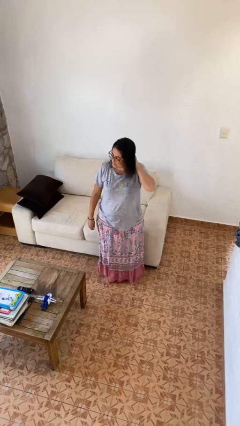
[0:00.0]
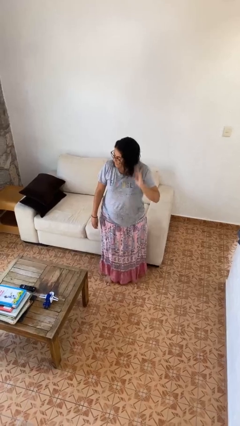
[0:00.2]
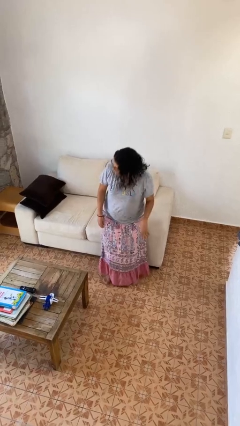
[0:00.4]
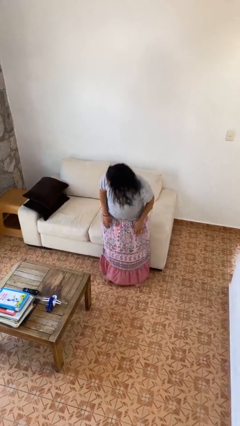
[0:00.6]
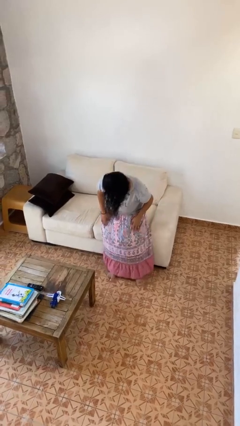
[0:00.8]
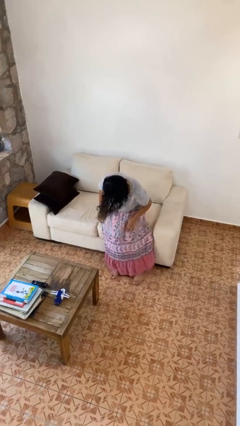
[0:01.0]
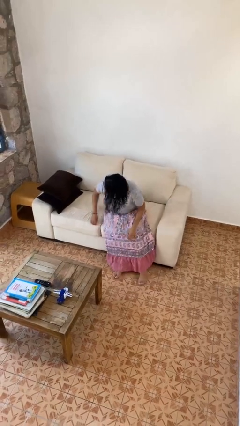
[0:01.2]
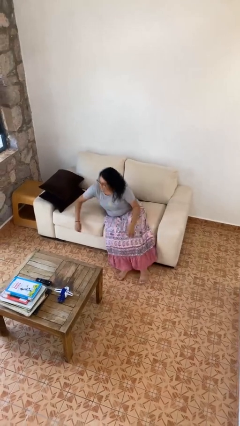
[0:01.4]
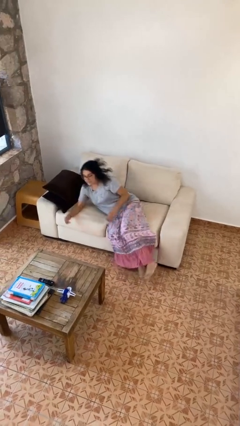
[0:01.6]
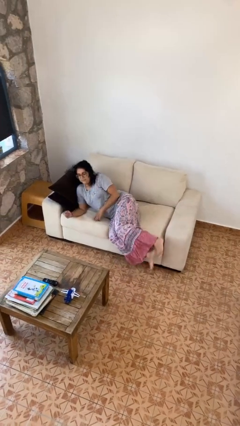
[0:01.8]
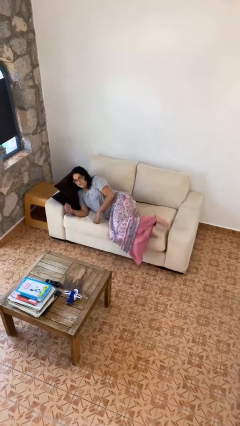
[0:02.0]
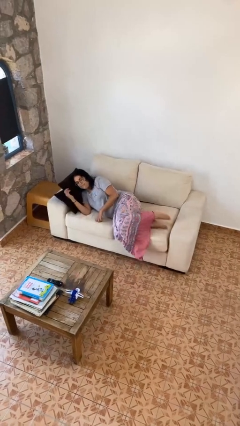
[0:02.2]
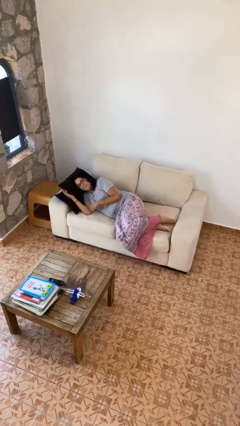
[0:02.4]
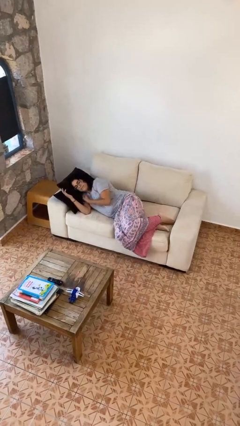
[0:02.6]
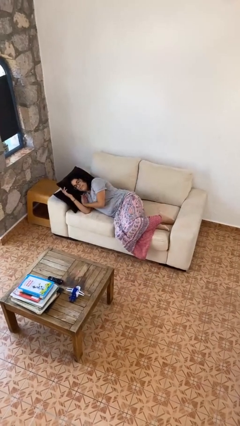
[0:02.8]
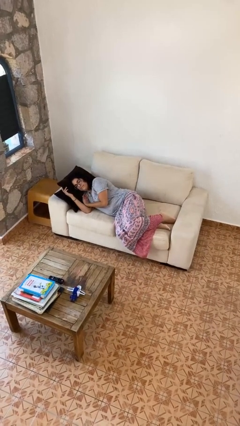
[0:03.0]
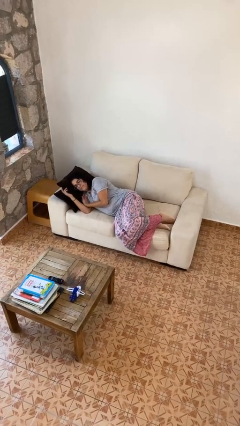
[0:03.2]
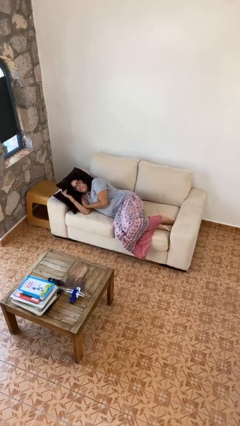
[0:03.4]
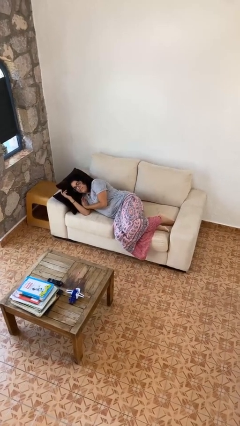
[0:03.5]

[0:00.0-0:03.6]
person lies down on couch

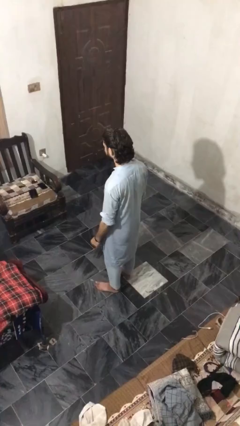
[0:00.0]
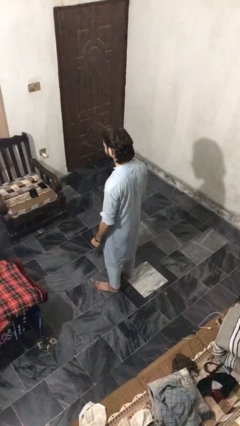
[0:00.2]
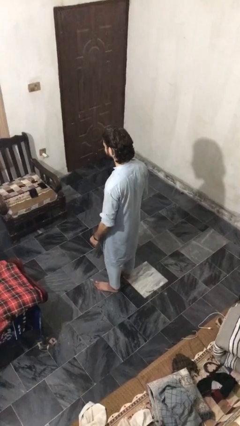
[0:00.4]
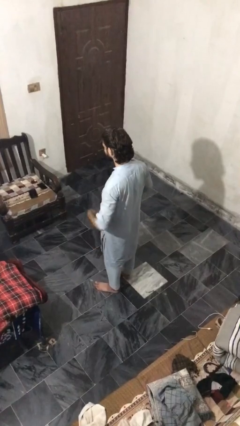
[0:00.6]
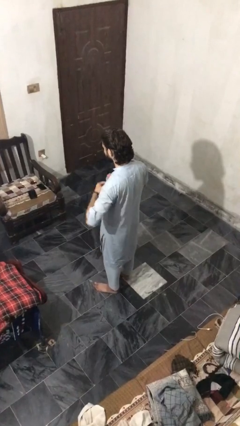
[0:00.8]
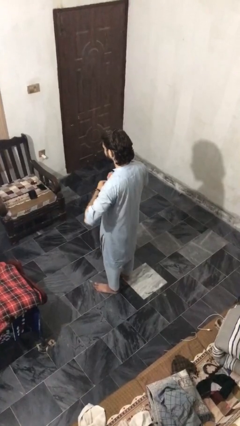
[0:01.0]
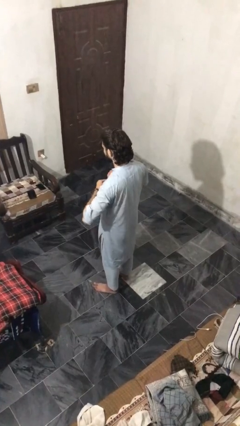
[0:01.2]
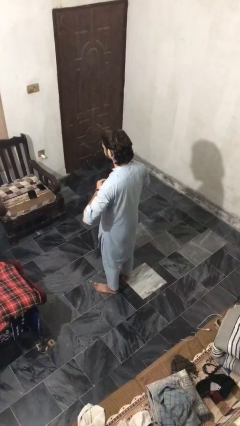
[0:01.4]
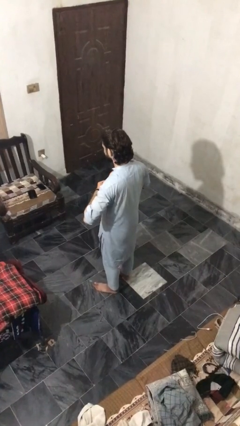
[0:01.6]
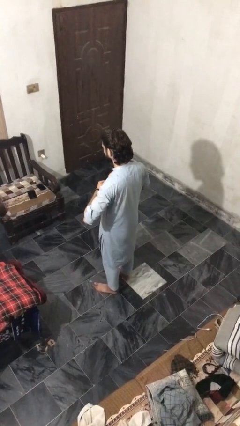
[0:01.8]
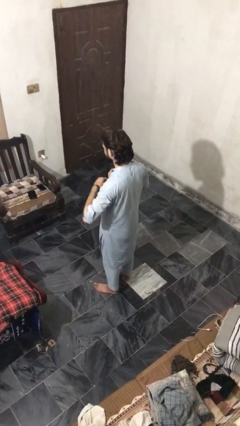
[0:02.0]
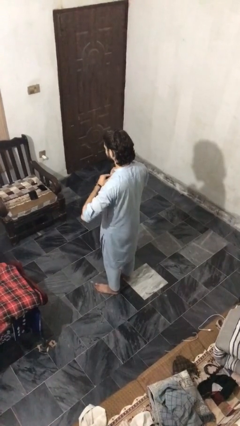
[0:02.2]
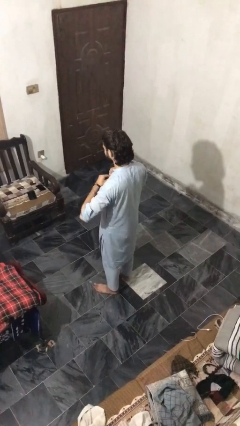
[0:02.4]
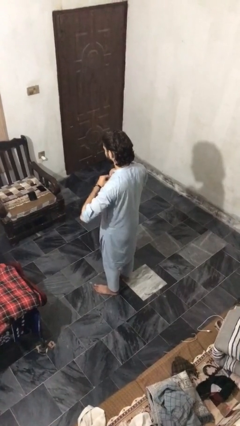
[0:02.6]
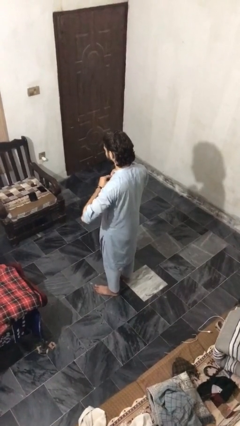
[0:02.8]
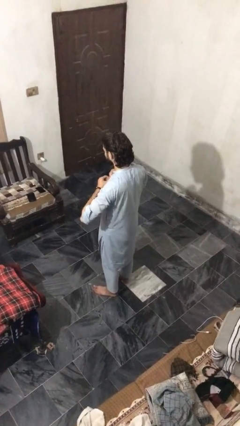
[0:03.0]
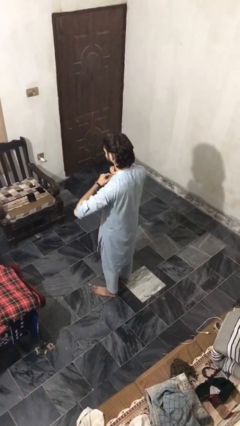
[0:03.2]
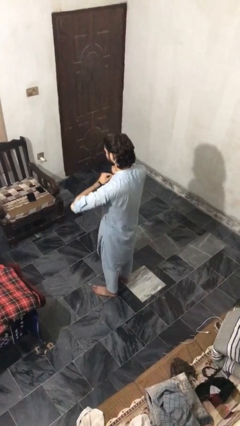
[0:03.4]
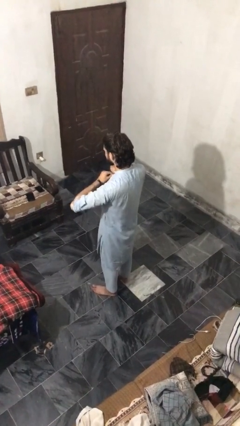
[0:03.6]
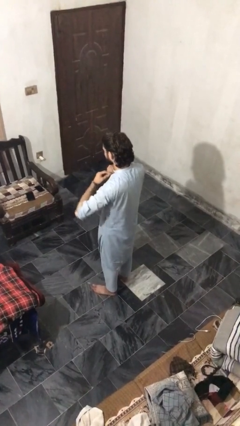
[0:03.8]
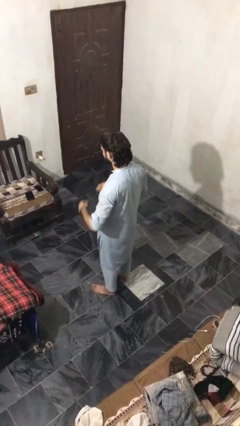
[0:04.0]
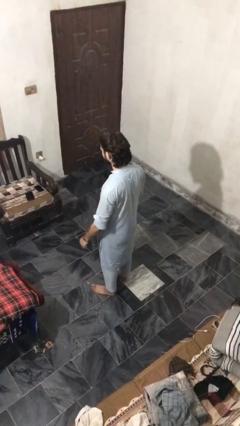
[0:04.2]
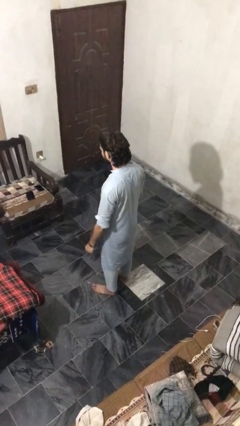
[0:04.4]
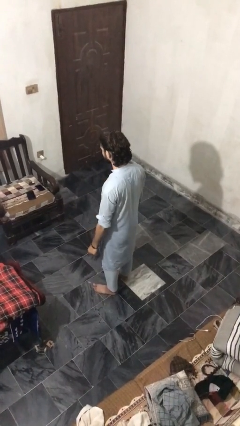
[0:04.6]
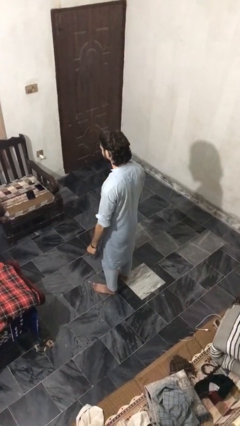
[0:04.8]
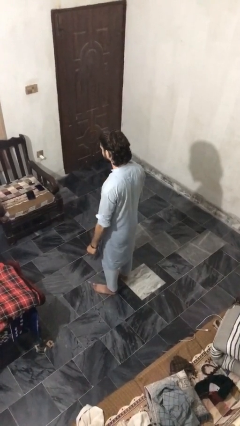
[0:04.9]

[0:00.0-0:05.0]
person buttons shirt

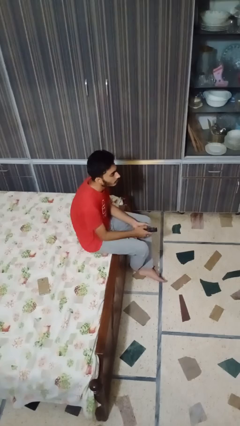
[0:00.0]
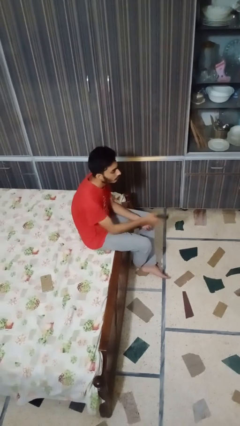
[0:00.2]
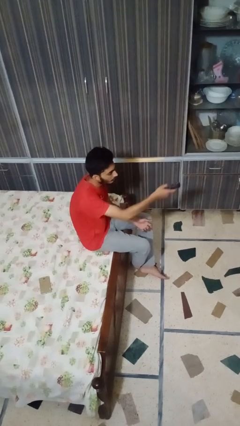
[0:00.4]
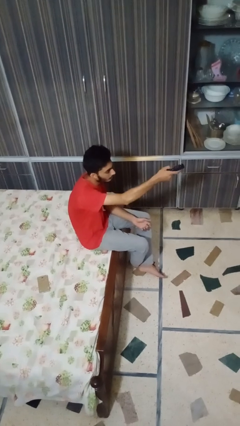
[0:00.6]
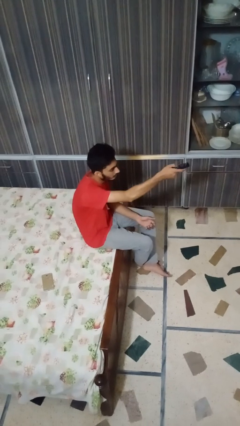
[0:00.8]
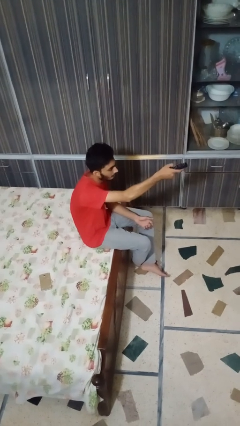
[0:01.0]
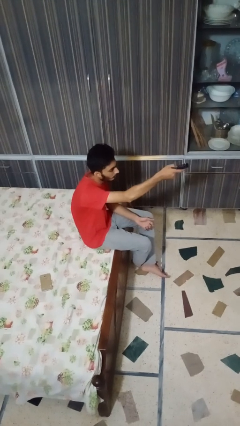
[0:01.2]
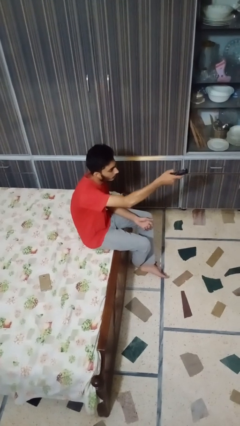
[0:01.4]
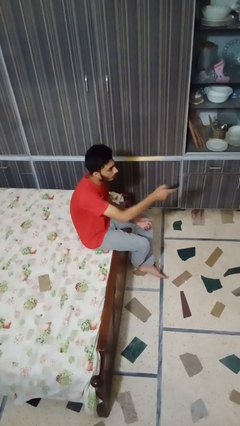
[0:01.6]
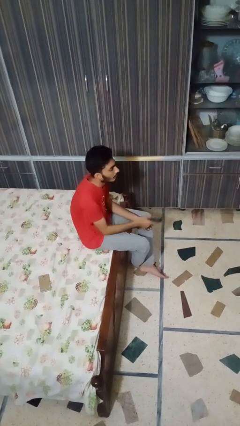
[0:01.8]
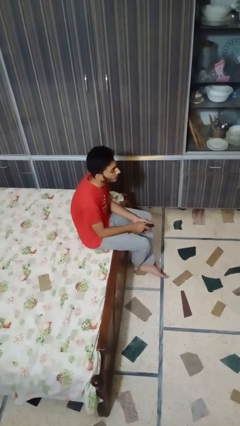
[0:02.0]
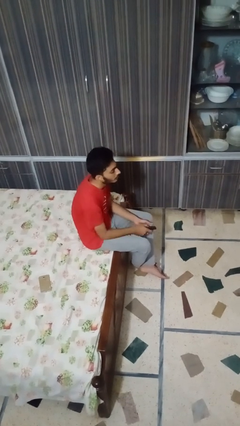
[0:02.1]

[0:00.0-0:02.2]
person uses television remote

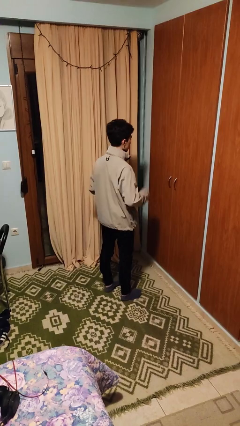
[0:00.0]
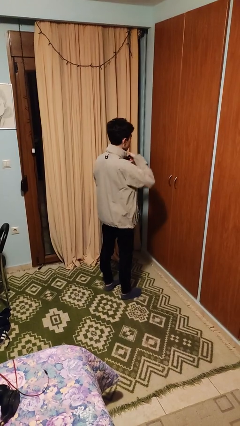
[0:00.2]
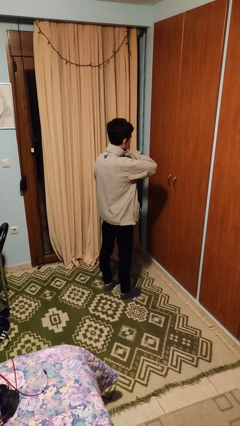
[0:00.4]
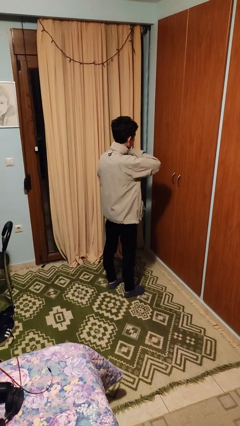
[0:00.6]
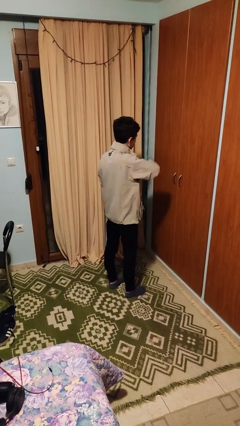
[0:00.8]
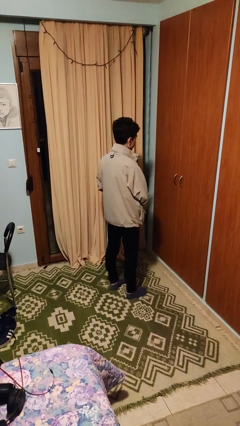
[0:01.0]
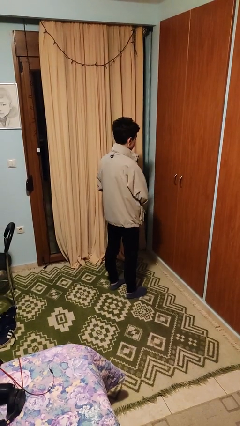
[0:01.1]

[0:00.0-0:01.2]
person unzips jacket

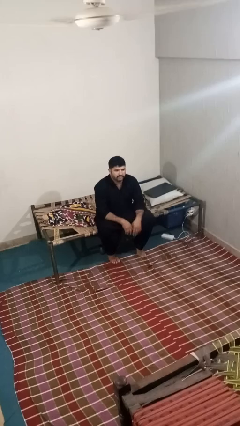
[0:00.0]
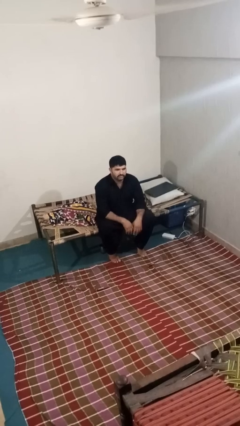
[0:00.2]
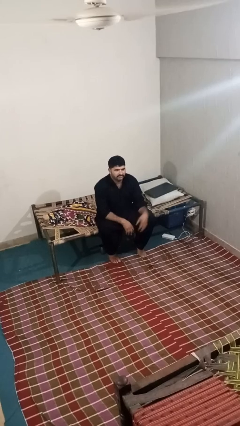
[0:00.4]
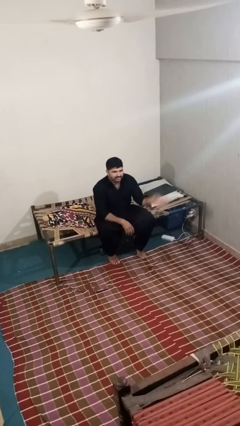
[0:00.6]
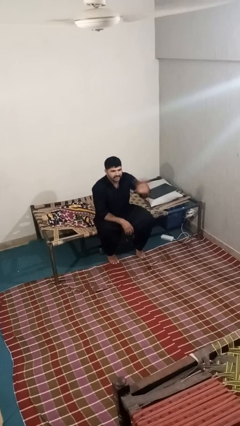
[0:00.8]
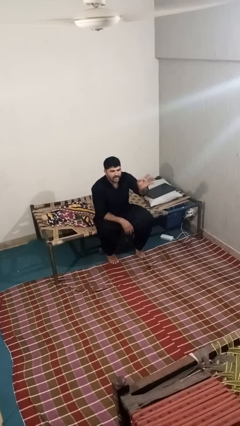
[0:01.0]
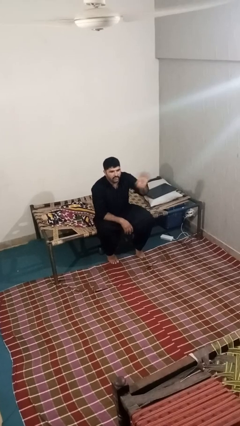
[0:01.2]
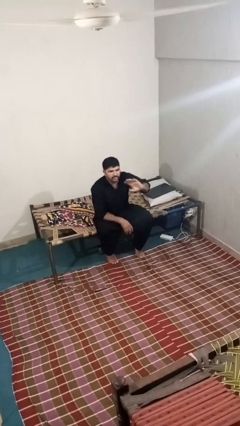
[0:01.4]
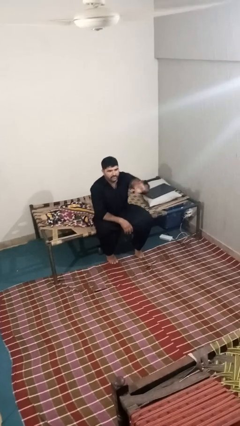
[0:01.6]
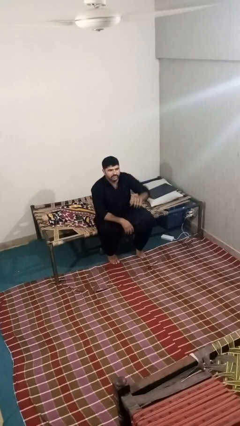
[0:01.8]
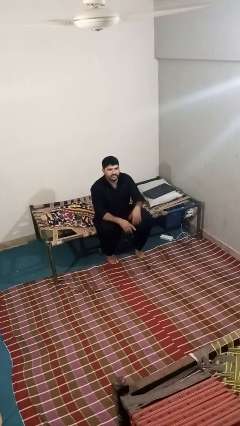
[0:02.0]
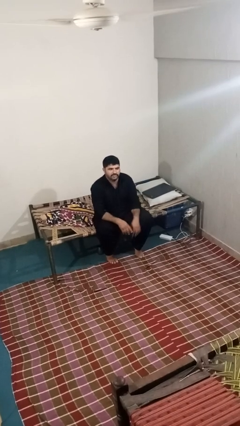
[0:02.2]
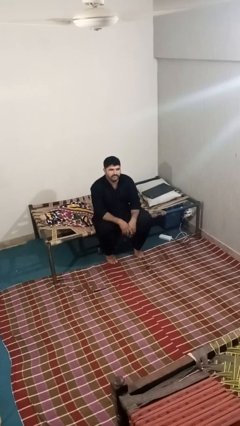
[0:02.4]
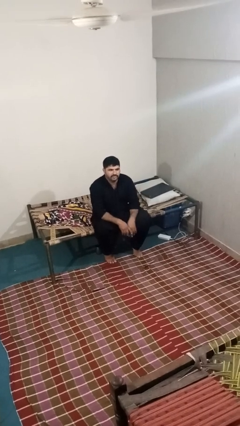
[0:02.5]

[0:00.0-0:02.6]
person waves at person

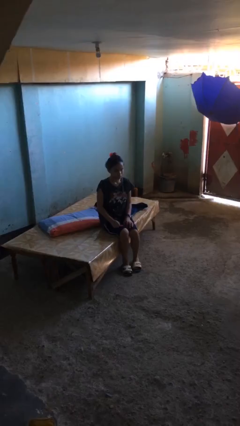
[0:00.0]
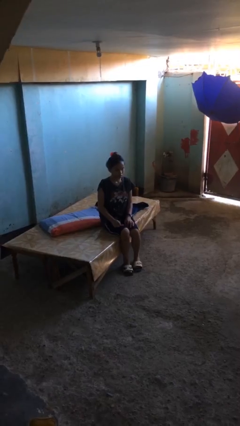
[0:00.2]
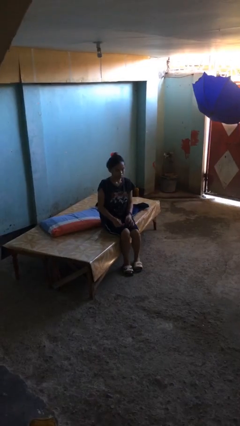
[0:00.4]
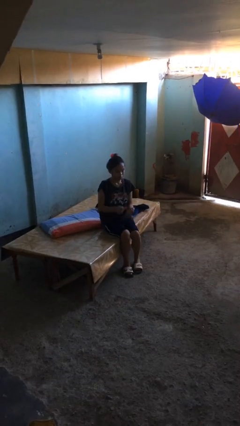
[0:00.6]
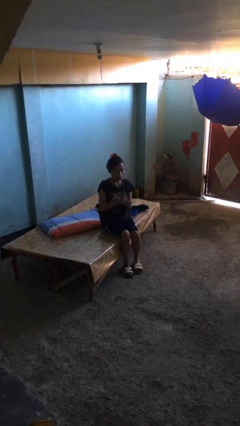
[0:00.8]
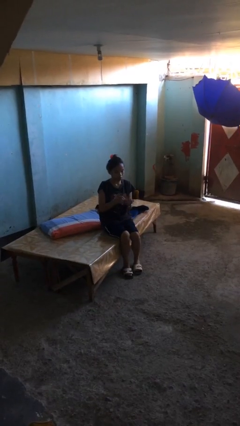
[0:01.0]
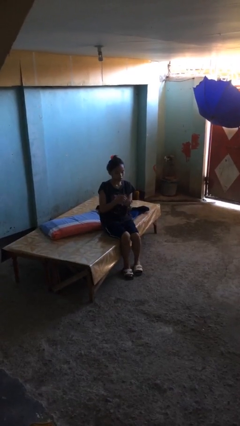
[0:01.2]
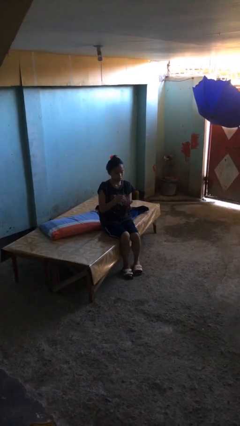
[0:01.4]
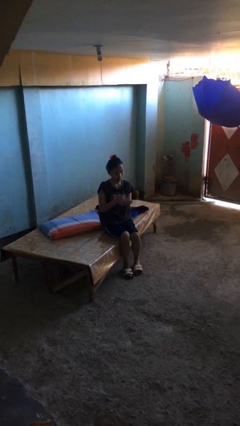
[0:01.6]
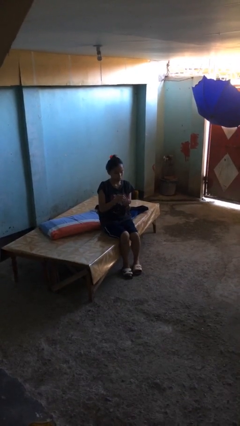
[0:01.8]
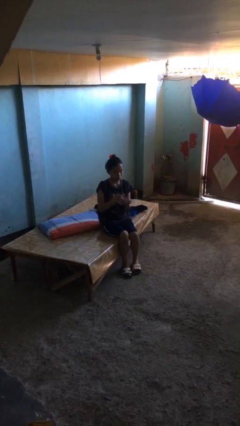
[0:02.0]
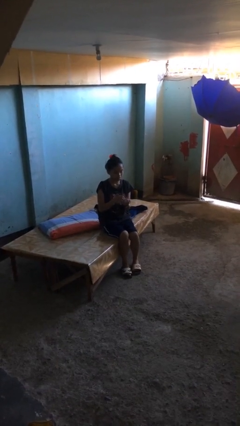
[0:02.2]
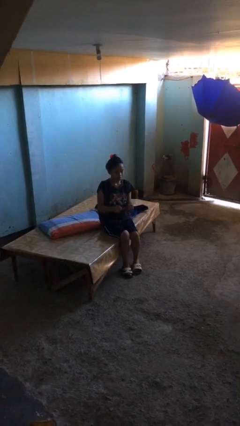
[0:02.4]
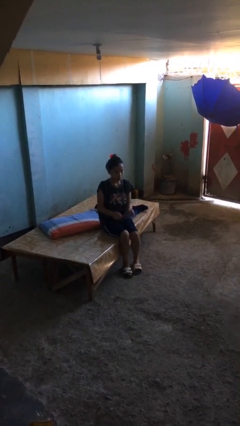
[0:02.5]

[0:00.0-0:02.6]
person files fingernails

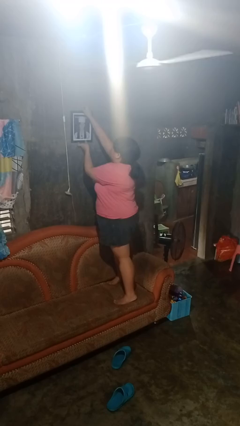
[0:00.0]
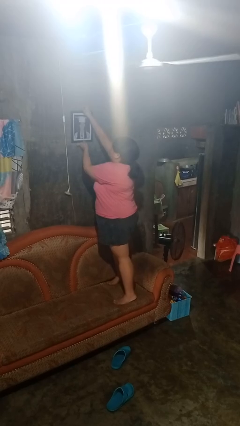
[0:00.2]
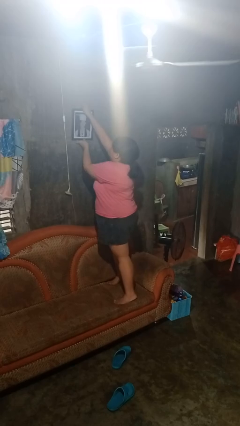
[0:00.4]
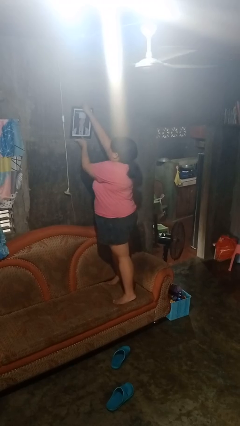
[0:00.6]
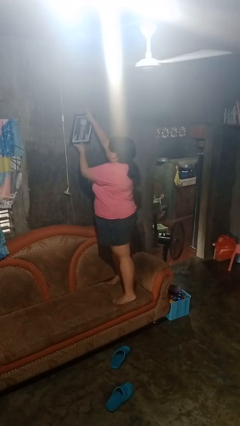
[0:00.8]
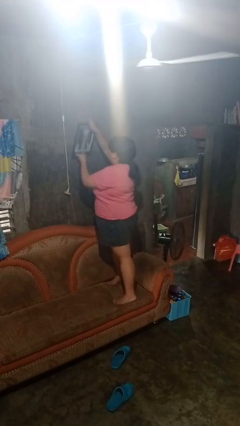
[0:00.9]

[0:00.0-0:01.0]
person takes down picture frame
